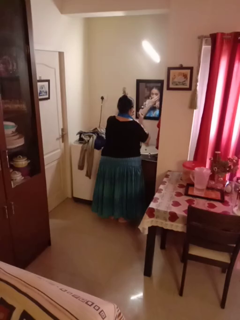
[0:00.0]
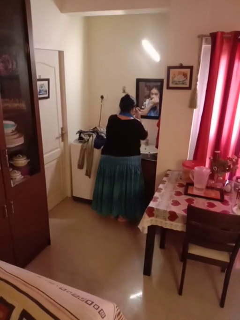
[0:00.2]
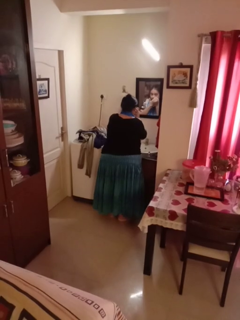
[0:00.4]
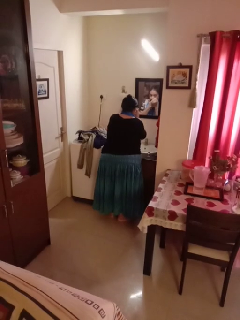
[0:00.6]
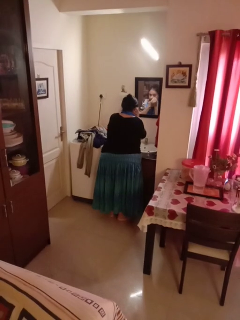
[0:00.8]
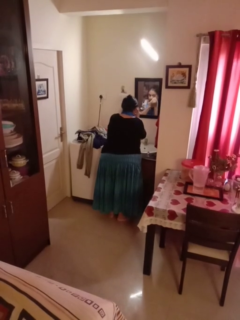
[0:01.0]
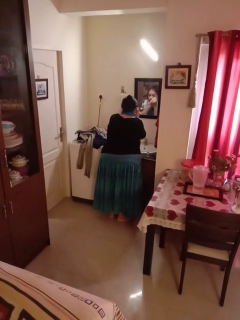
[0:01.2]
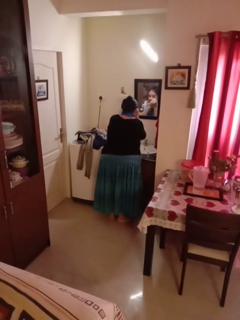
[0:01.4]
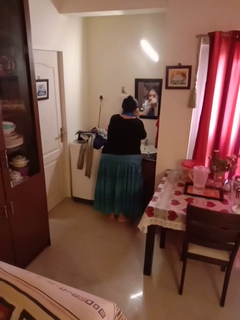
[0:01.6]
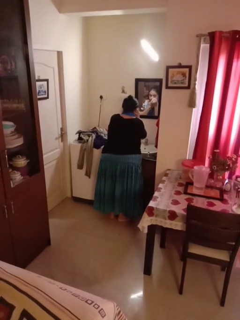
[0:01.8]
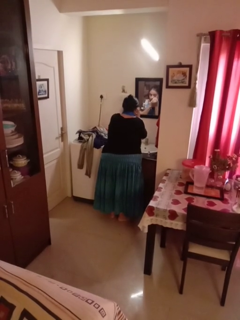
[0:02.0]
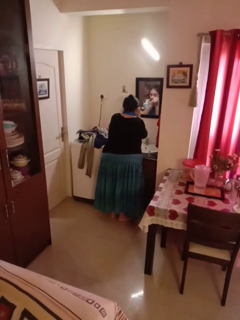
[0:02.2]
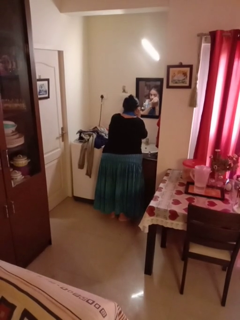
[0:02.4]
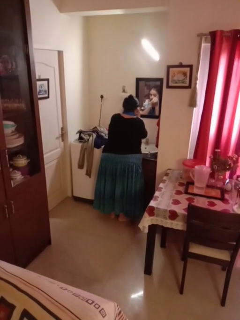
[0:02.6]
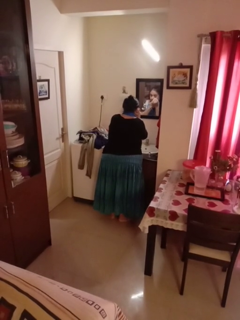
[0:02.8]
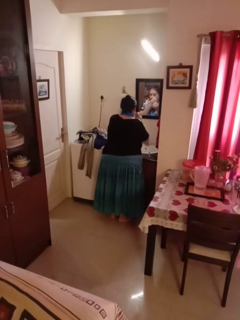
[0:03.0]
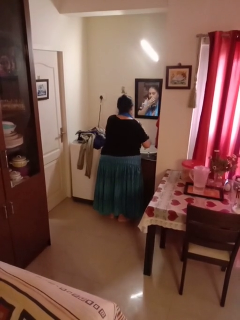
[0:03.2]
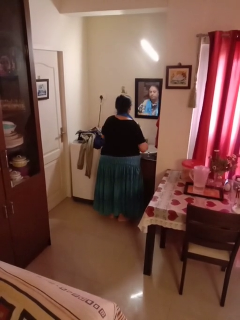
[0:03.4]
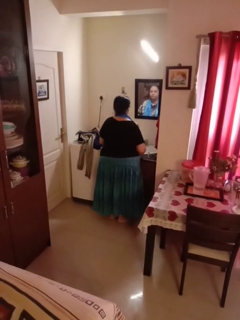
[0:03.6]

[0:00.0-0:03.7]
person applies eye makeup

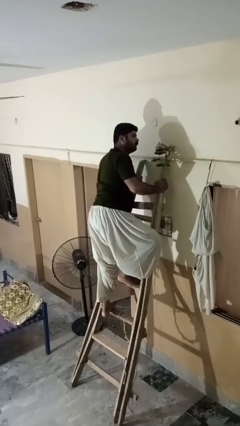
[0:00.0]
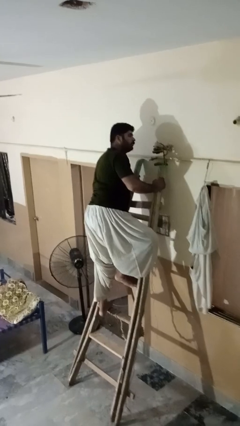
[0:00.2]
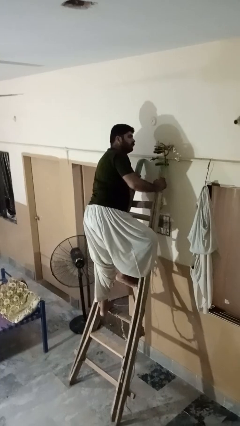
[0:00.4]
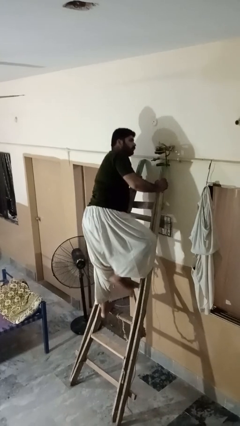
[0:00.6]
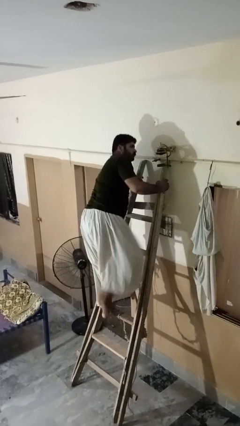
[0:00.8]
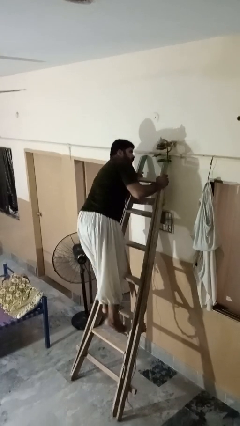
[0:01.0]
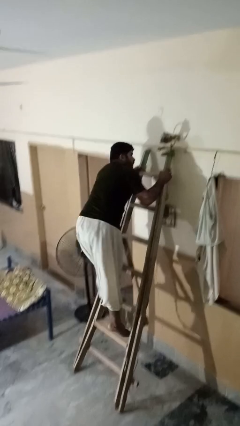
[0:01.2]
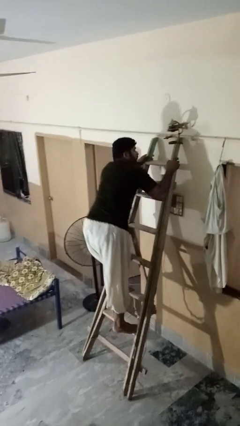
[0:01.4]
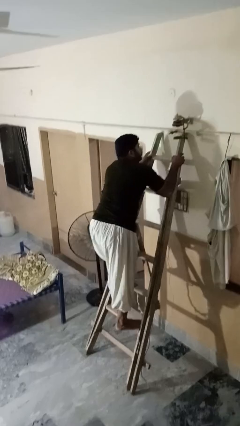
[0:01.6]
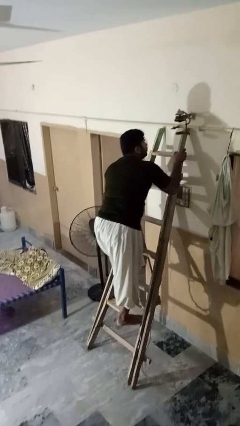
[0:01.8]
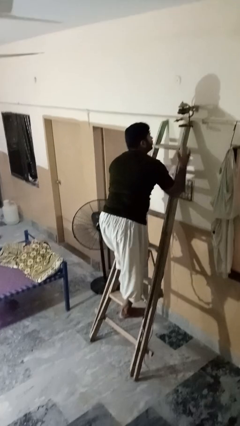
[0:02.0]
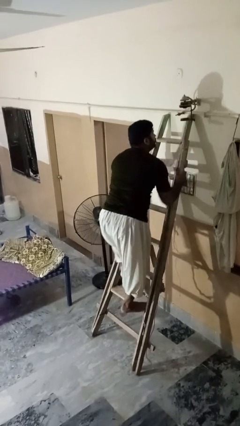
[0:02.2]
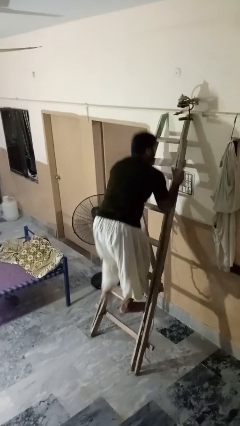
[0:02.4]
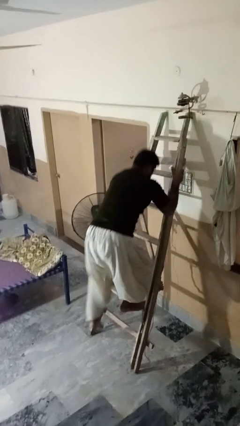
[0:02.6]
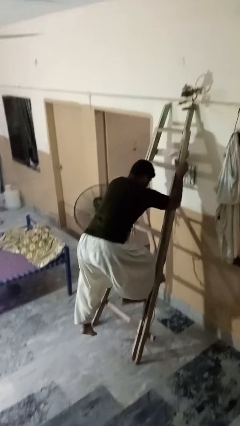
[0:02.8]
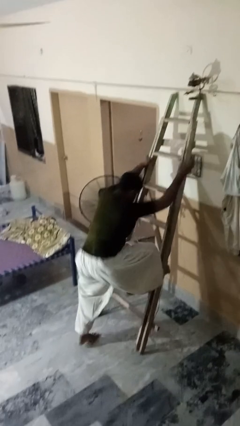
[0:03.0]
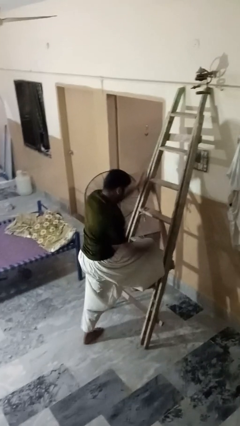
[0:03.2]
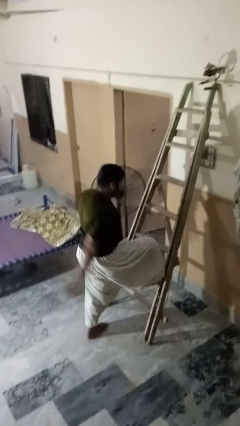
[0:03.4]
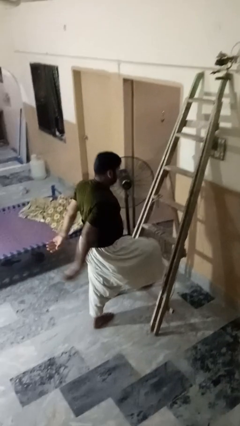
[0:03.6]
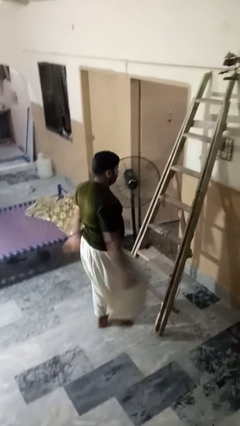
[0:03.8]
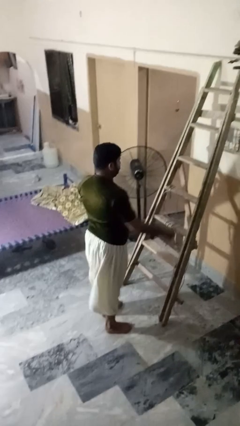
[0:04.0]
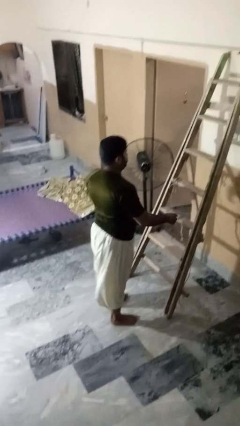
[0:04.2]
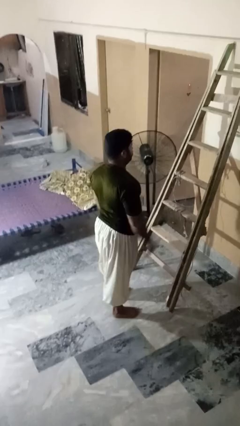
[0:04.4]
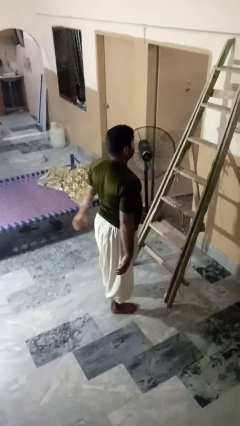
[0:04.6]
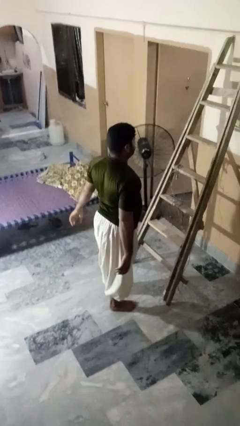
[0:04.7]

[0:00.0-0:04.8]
person climbs down ladder

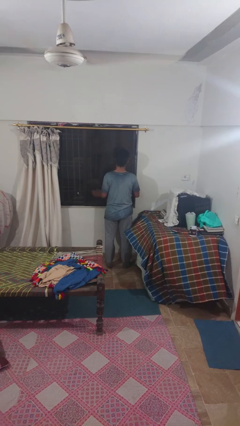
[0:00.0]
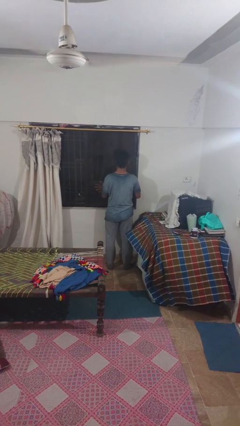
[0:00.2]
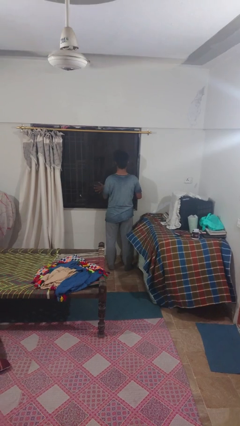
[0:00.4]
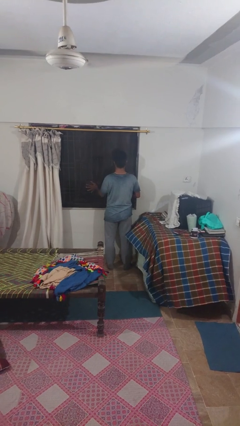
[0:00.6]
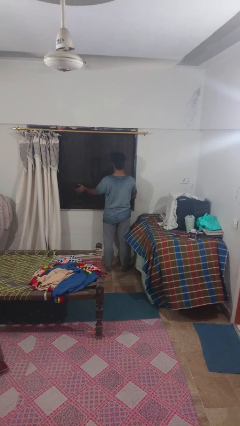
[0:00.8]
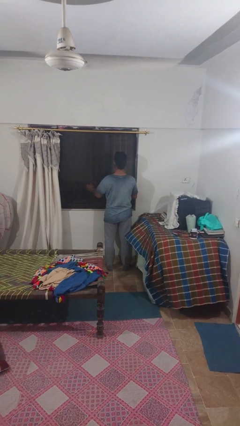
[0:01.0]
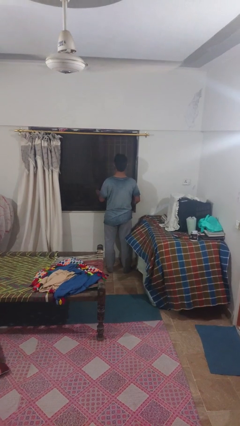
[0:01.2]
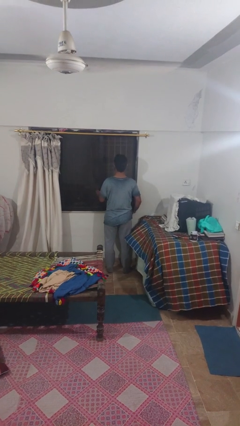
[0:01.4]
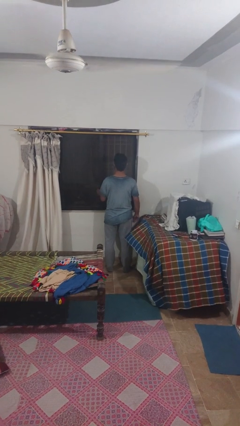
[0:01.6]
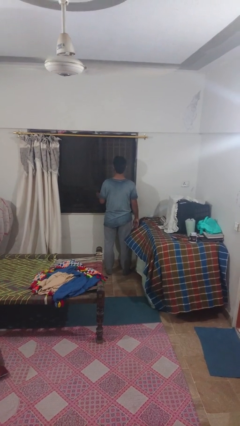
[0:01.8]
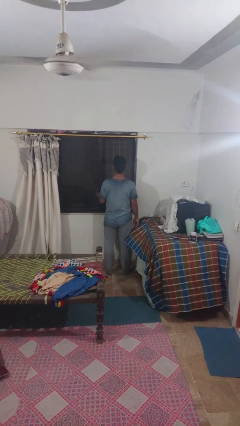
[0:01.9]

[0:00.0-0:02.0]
person opens sliding door

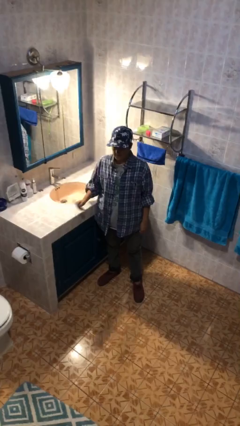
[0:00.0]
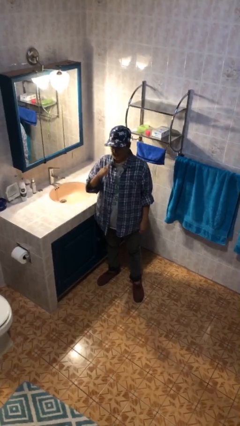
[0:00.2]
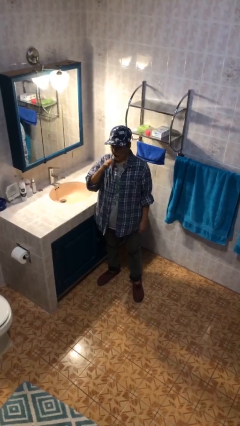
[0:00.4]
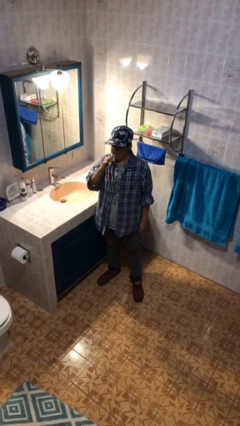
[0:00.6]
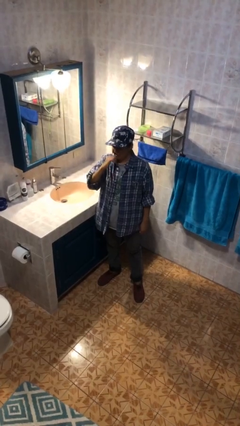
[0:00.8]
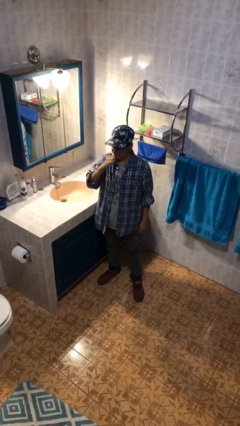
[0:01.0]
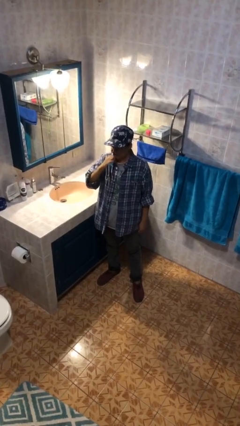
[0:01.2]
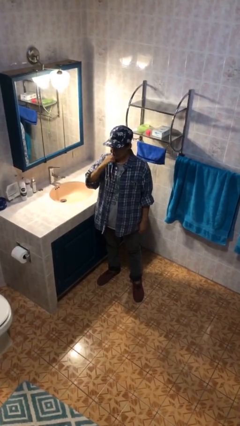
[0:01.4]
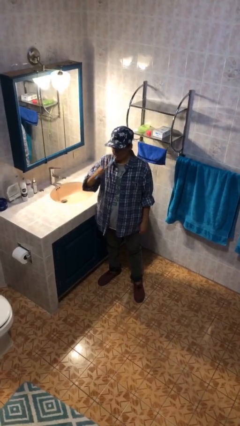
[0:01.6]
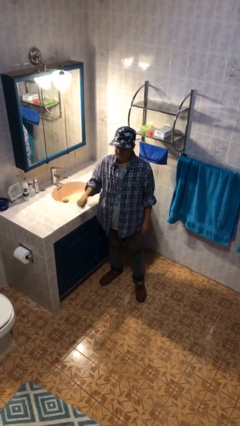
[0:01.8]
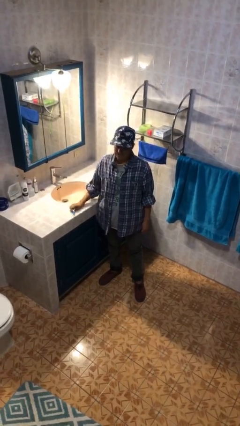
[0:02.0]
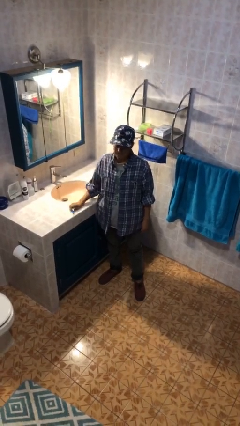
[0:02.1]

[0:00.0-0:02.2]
person brushes teeth

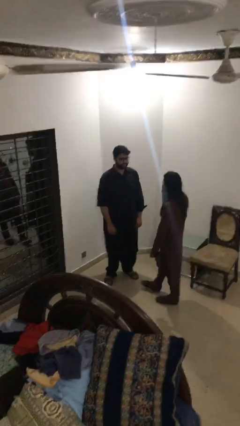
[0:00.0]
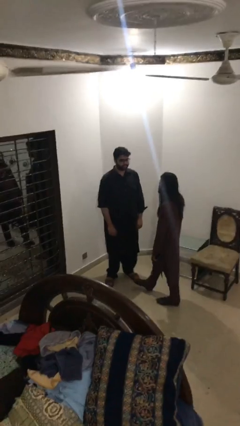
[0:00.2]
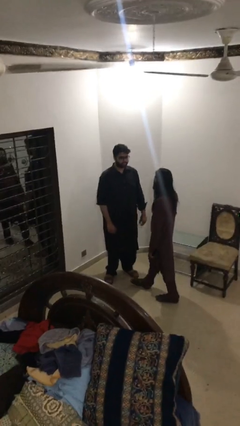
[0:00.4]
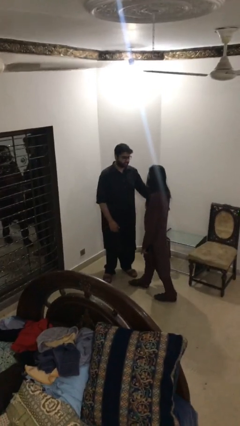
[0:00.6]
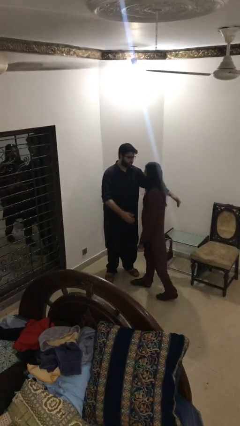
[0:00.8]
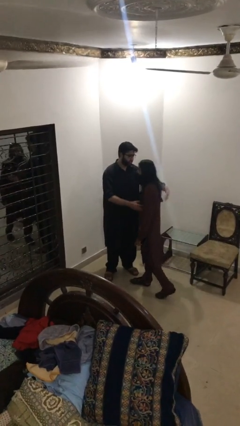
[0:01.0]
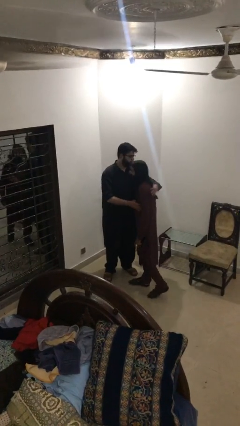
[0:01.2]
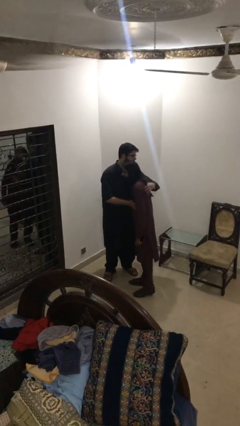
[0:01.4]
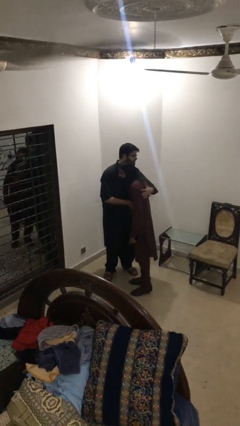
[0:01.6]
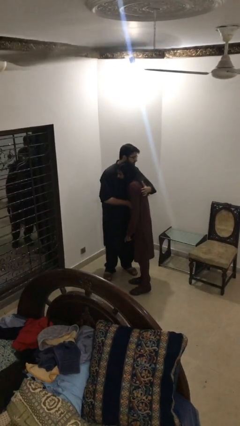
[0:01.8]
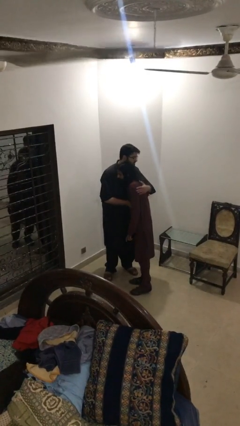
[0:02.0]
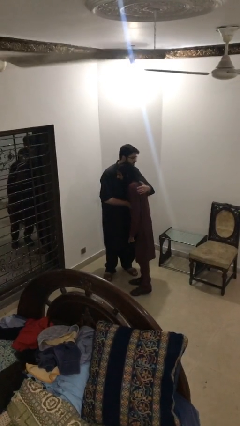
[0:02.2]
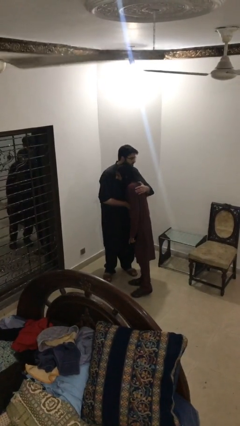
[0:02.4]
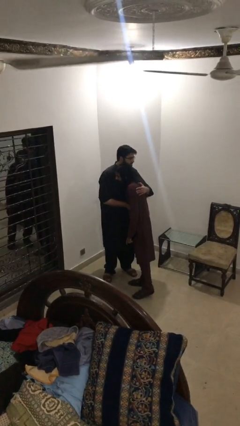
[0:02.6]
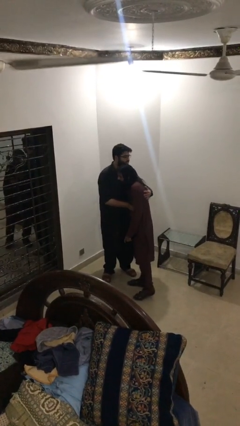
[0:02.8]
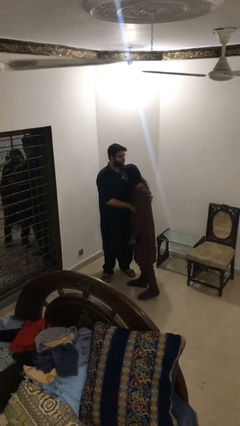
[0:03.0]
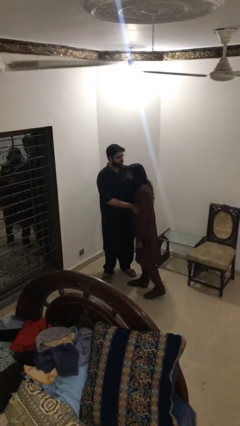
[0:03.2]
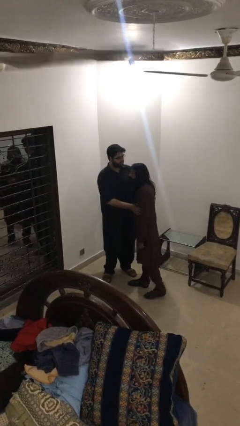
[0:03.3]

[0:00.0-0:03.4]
person embraces person

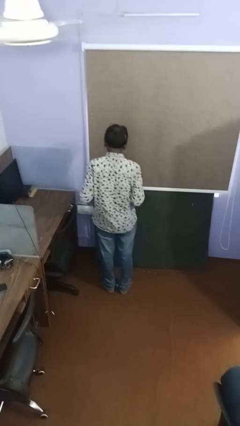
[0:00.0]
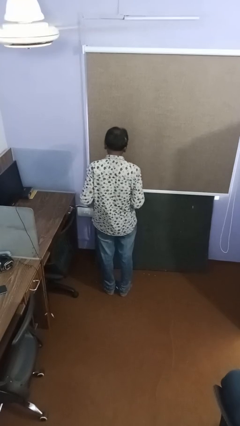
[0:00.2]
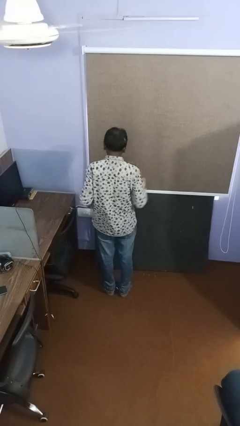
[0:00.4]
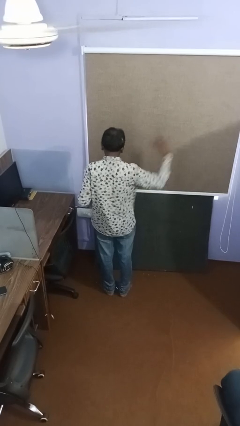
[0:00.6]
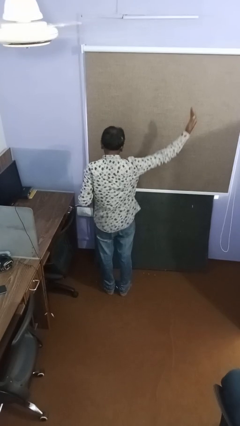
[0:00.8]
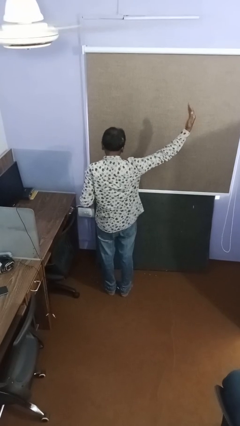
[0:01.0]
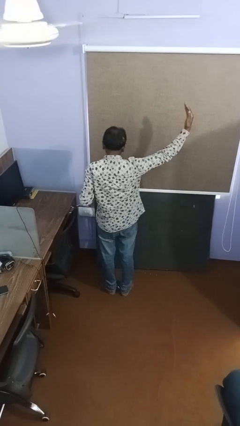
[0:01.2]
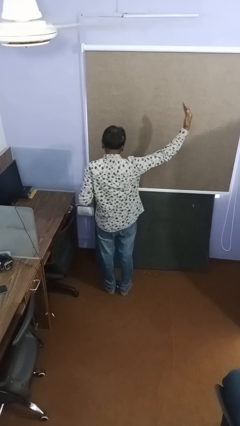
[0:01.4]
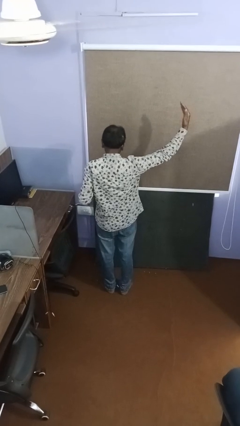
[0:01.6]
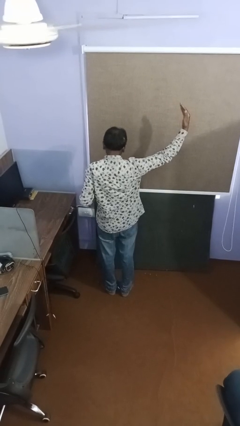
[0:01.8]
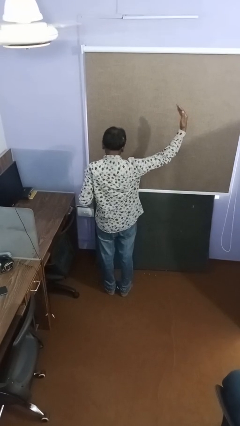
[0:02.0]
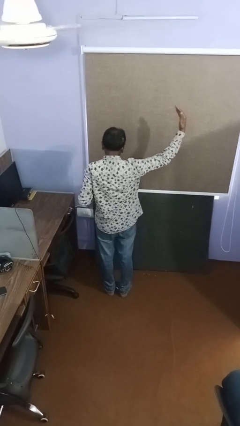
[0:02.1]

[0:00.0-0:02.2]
person gestures swipe right

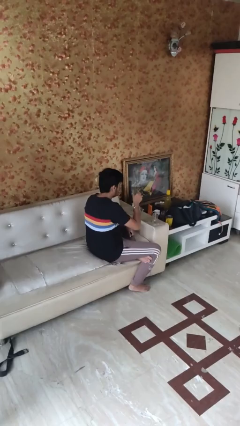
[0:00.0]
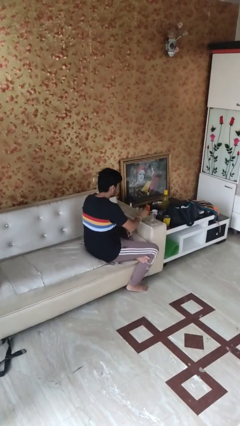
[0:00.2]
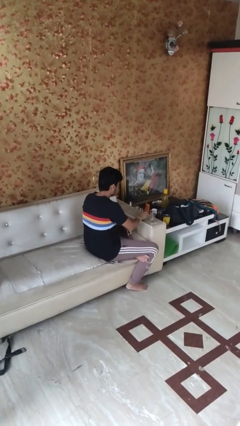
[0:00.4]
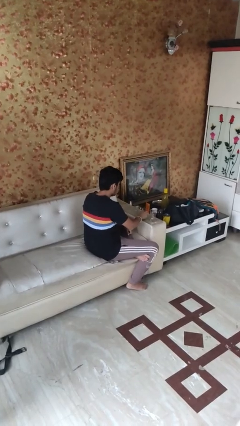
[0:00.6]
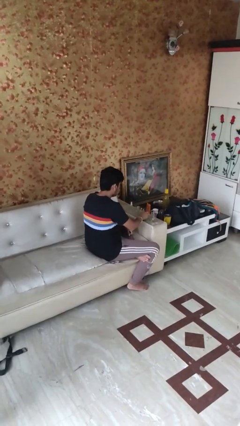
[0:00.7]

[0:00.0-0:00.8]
person puts down object on table
